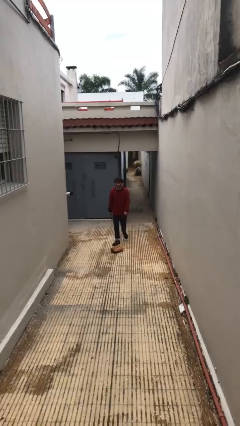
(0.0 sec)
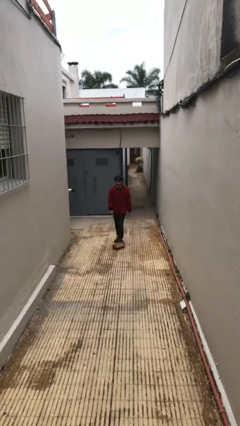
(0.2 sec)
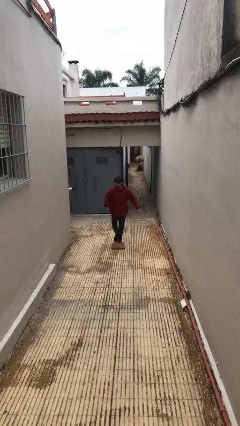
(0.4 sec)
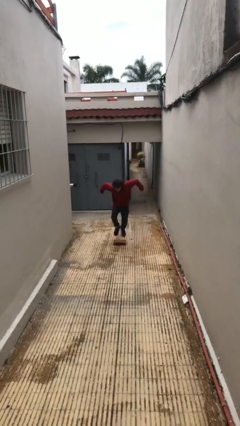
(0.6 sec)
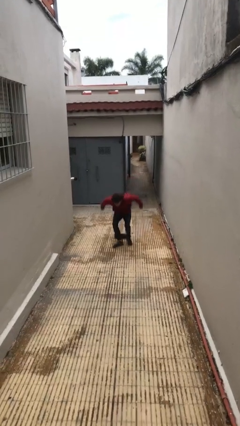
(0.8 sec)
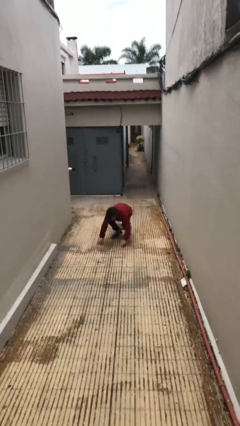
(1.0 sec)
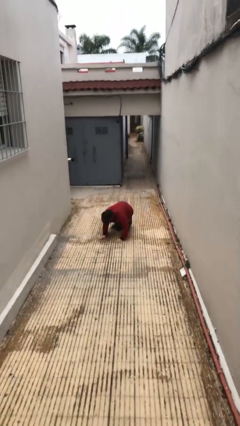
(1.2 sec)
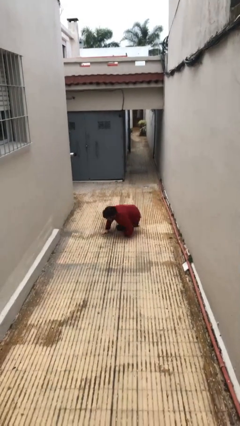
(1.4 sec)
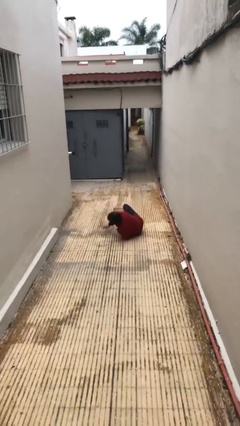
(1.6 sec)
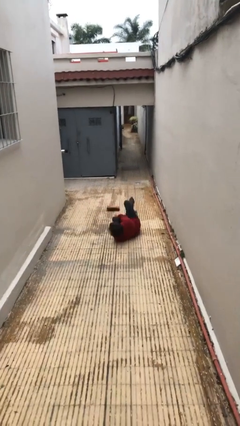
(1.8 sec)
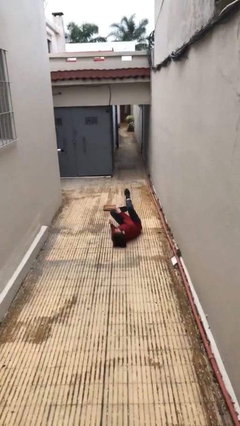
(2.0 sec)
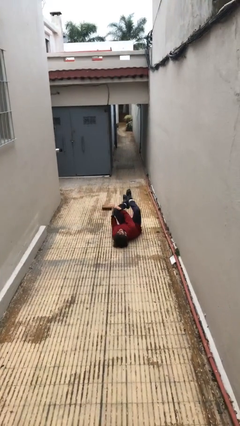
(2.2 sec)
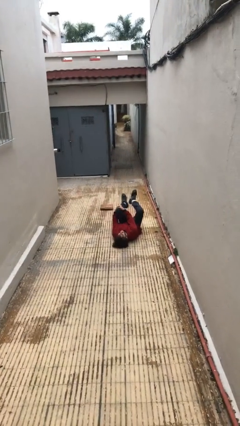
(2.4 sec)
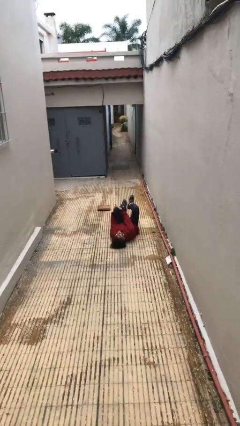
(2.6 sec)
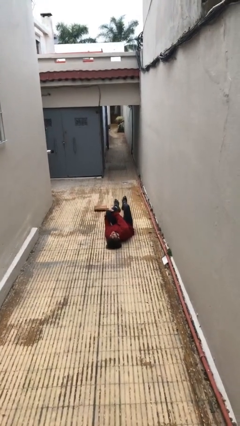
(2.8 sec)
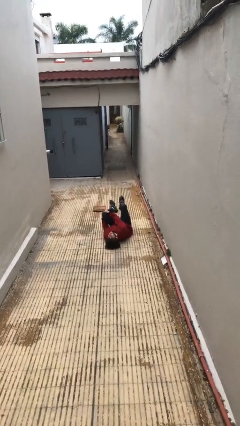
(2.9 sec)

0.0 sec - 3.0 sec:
person trips on object on floor

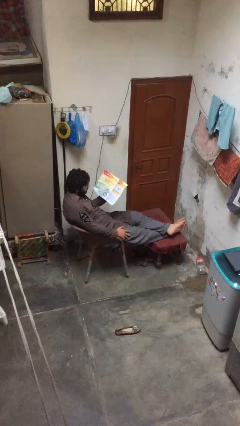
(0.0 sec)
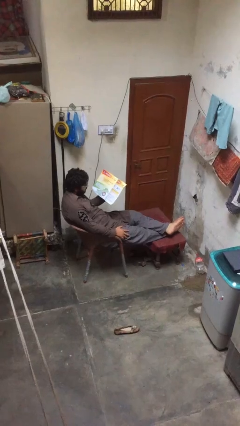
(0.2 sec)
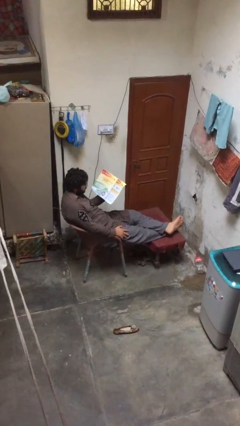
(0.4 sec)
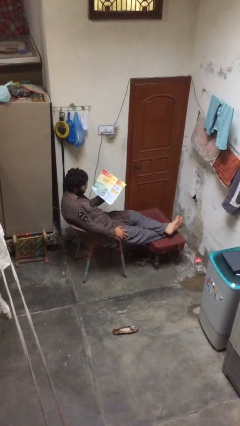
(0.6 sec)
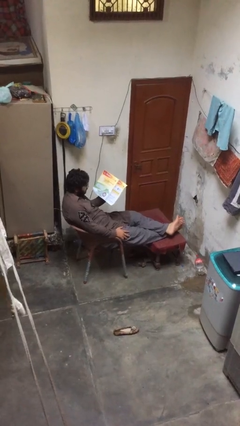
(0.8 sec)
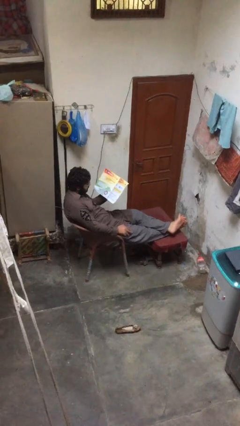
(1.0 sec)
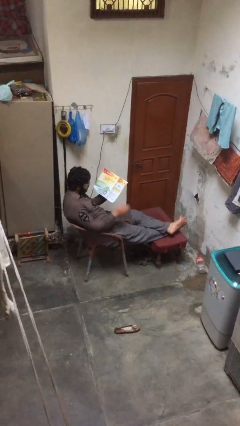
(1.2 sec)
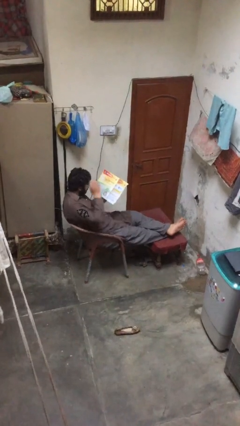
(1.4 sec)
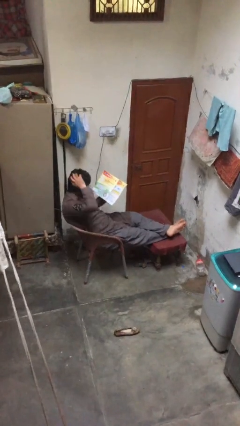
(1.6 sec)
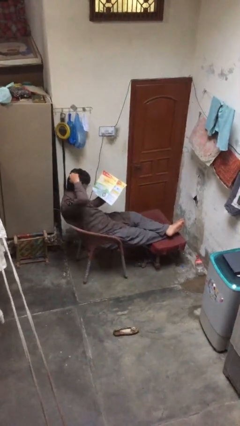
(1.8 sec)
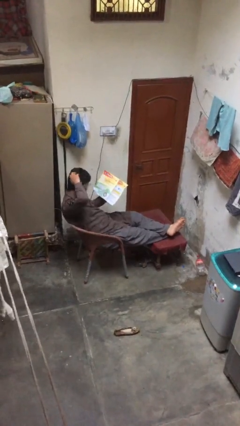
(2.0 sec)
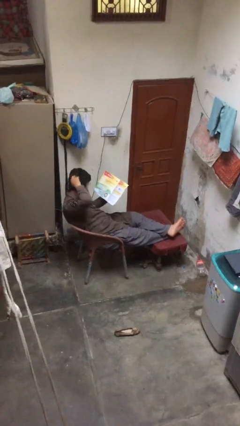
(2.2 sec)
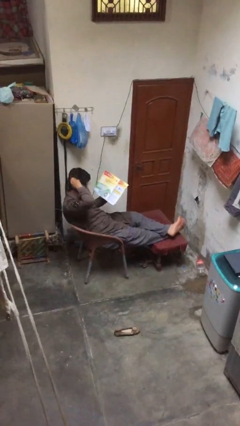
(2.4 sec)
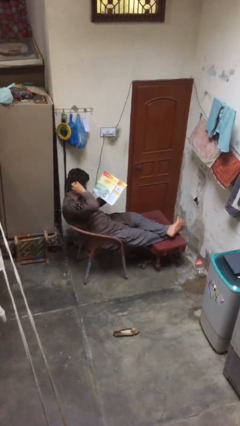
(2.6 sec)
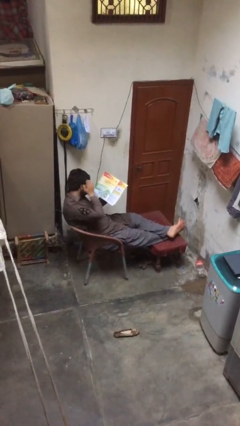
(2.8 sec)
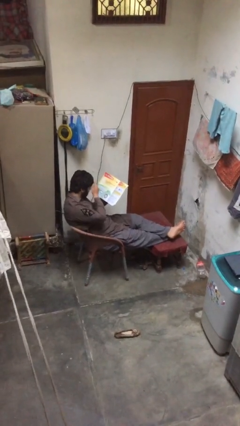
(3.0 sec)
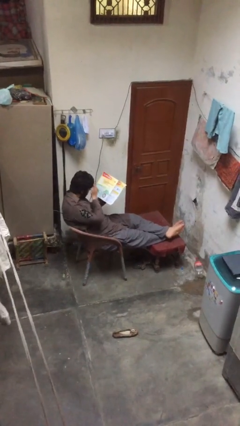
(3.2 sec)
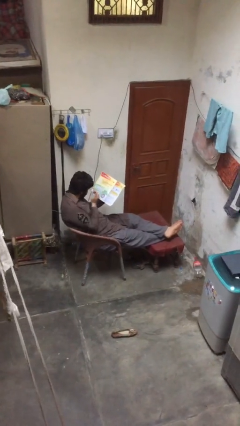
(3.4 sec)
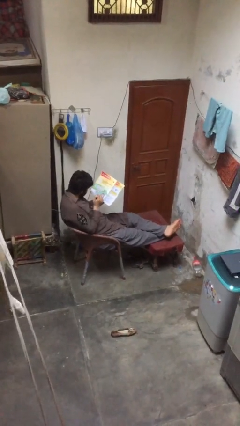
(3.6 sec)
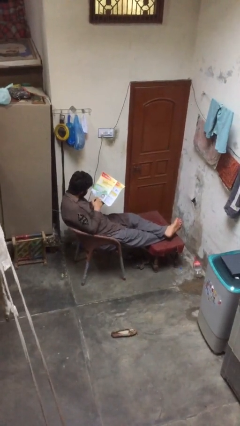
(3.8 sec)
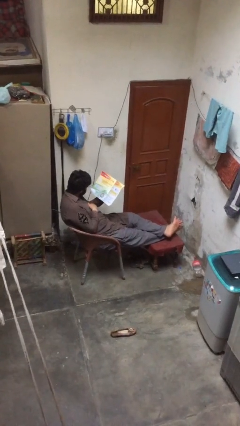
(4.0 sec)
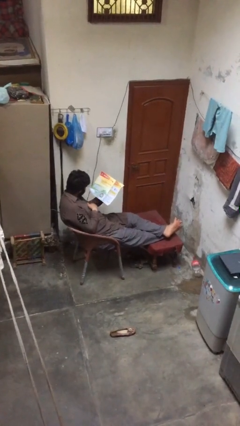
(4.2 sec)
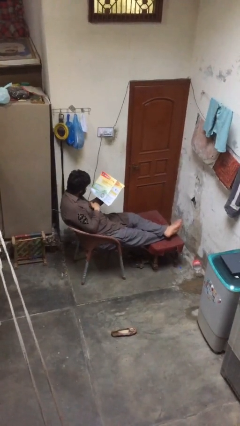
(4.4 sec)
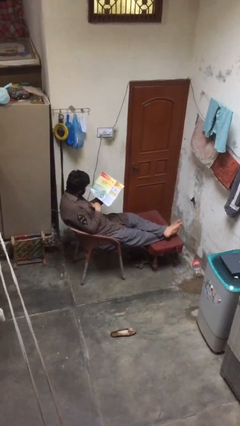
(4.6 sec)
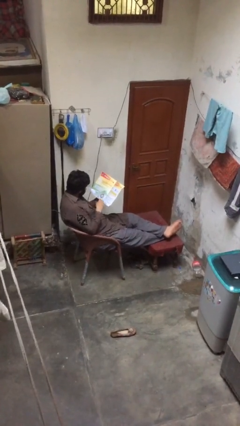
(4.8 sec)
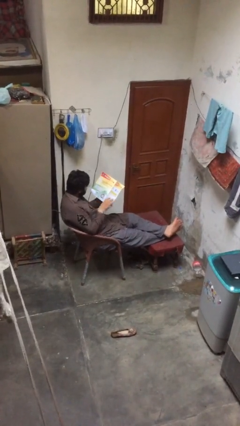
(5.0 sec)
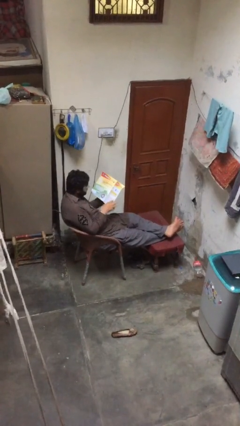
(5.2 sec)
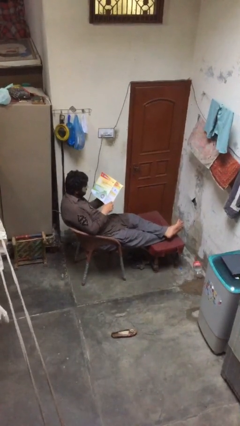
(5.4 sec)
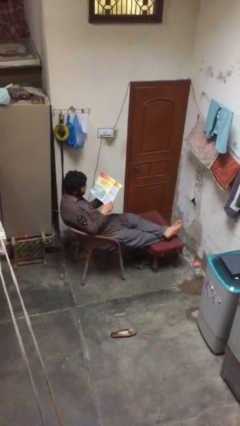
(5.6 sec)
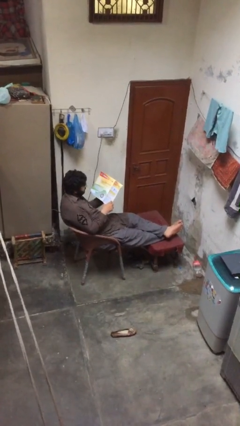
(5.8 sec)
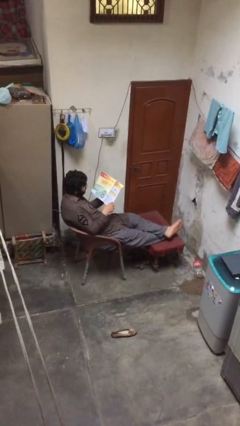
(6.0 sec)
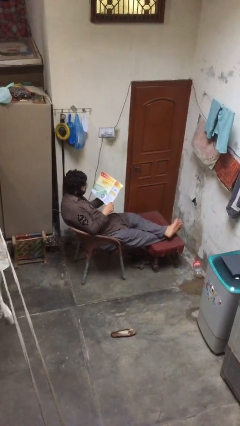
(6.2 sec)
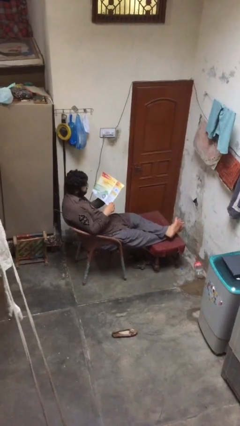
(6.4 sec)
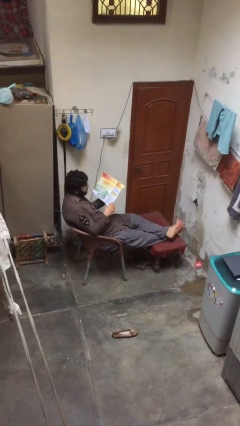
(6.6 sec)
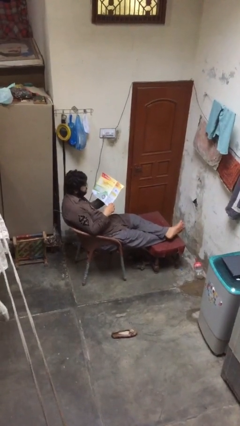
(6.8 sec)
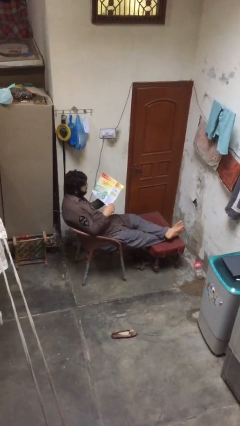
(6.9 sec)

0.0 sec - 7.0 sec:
person reads document

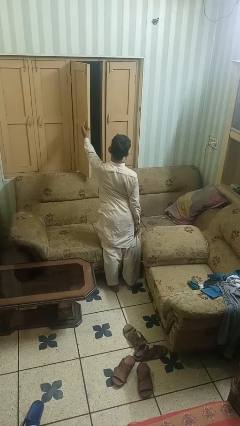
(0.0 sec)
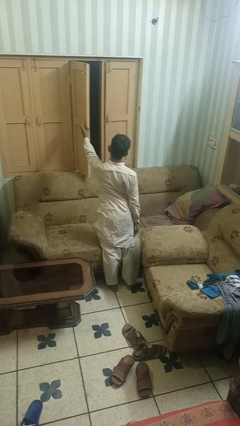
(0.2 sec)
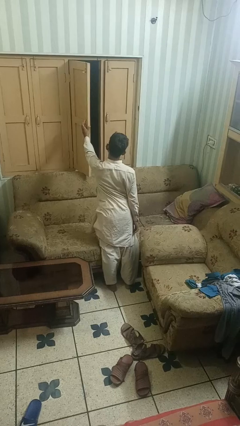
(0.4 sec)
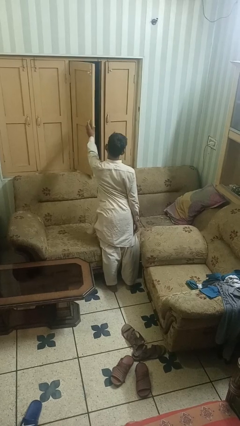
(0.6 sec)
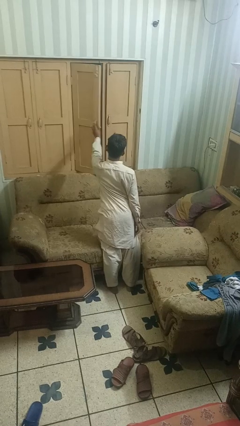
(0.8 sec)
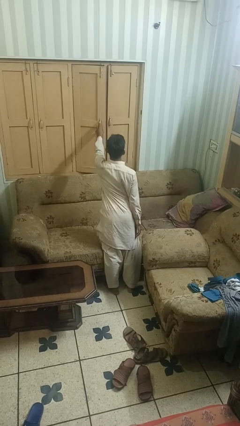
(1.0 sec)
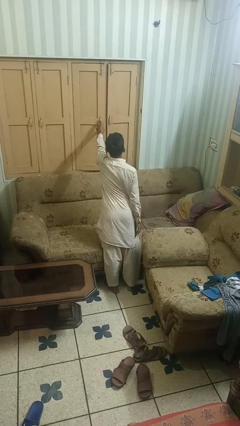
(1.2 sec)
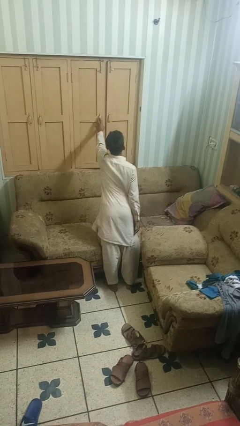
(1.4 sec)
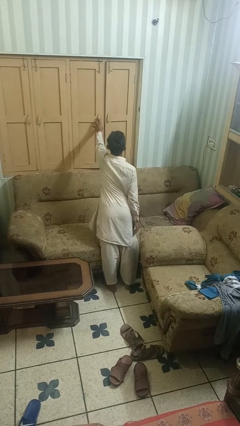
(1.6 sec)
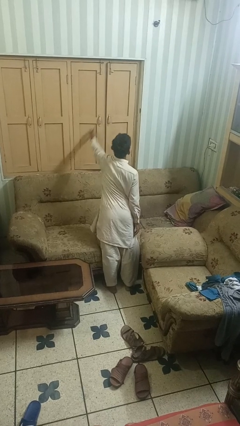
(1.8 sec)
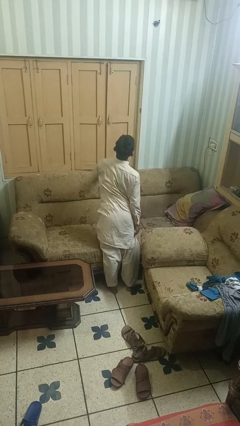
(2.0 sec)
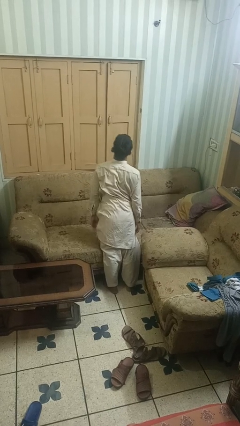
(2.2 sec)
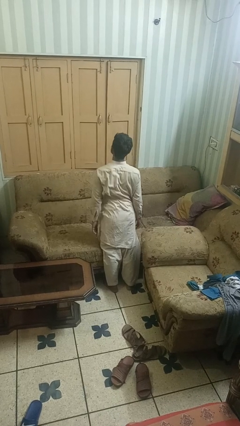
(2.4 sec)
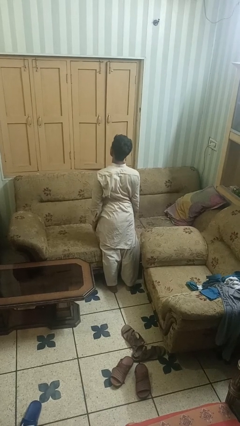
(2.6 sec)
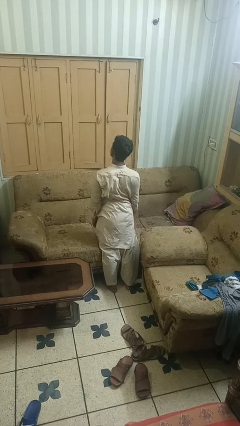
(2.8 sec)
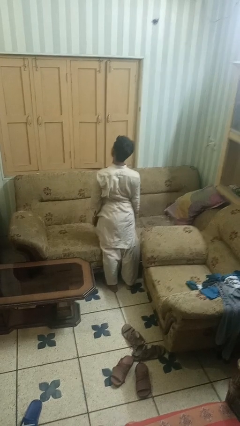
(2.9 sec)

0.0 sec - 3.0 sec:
person closes home window

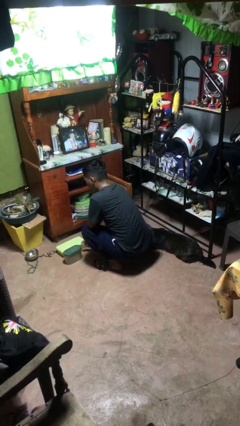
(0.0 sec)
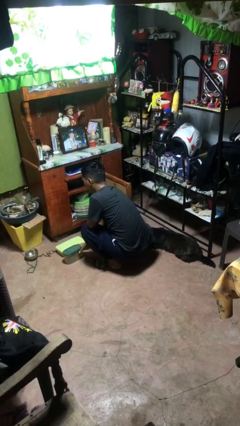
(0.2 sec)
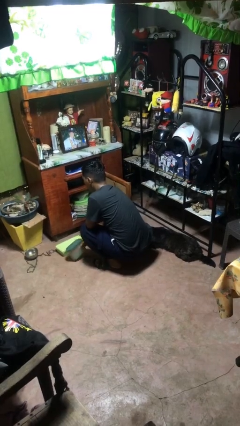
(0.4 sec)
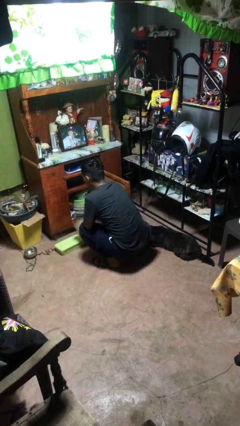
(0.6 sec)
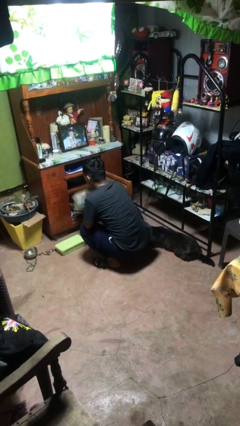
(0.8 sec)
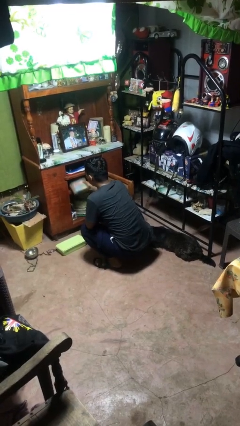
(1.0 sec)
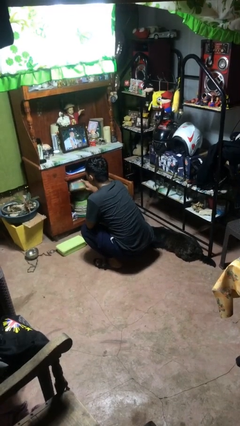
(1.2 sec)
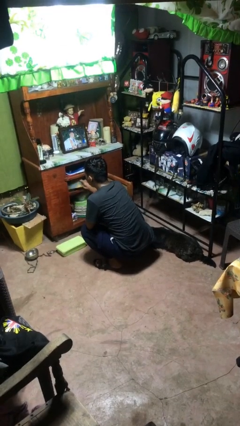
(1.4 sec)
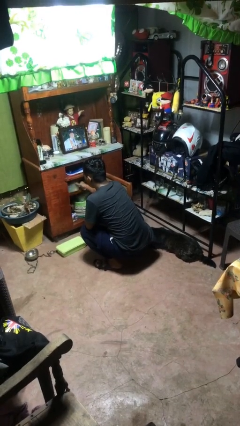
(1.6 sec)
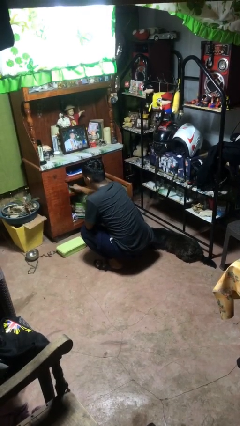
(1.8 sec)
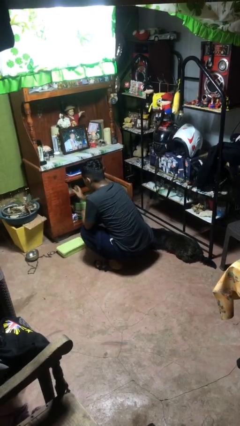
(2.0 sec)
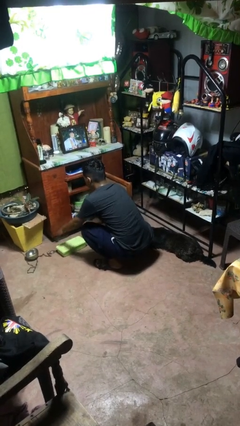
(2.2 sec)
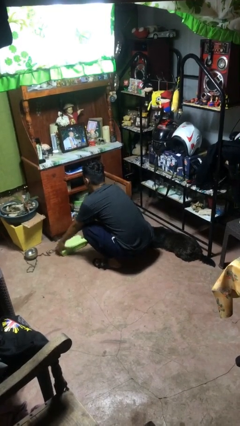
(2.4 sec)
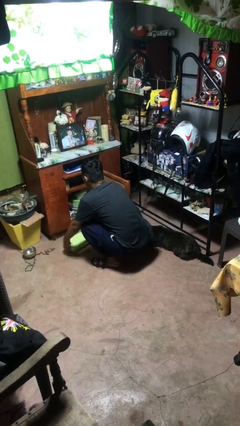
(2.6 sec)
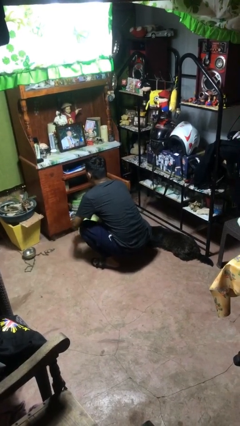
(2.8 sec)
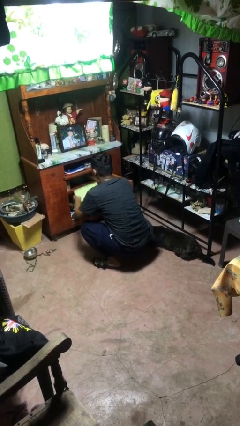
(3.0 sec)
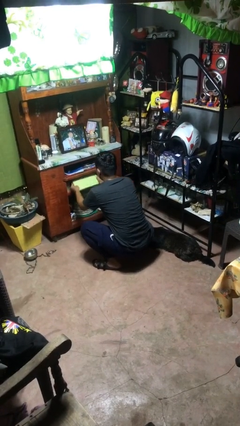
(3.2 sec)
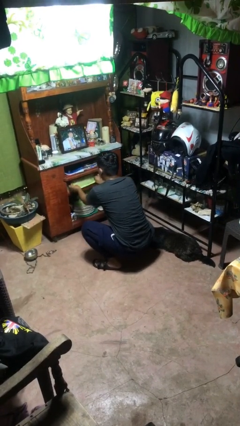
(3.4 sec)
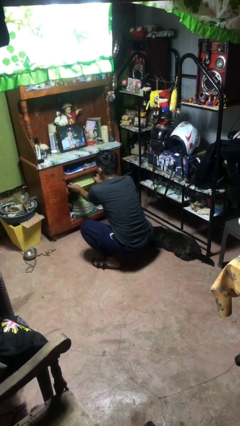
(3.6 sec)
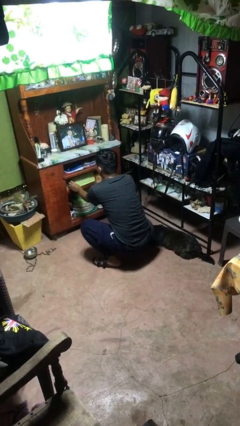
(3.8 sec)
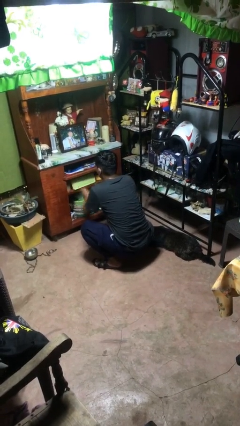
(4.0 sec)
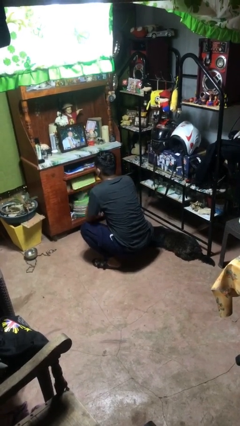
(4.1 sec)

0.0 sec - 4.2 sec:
person puts object in cabinet
